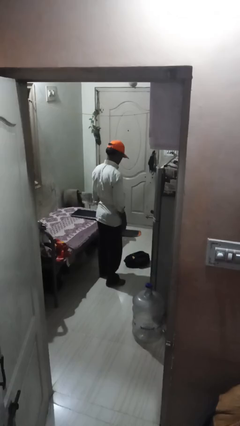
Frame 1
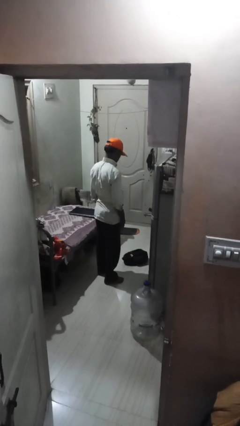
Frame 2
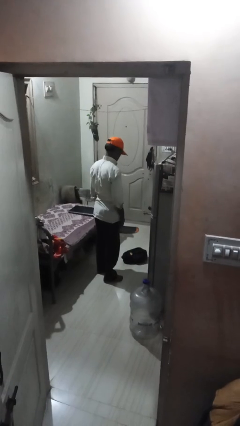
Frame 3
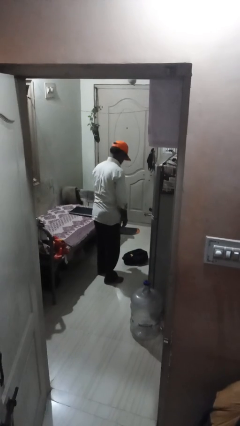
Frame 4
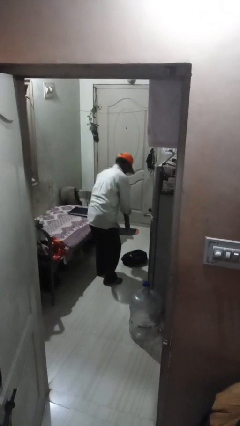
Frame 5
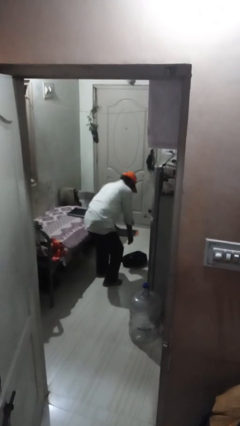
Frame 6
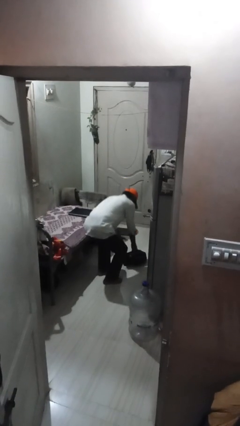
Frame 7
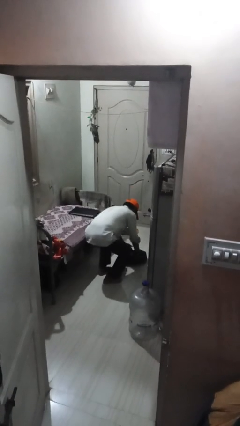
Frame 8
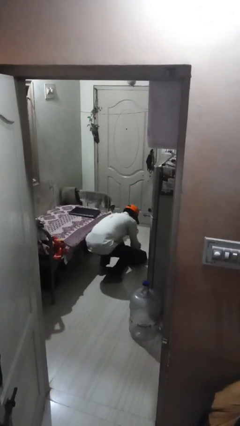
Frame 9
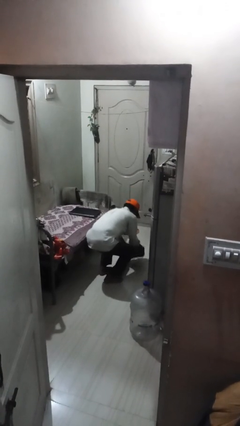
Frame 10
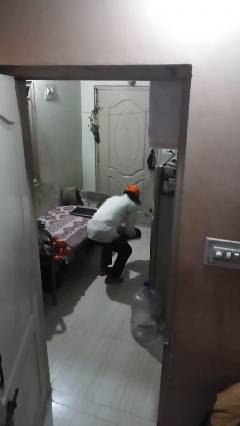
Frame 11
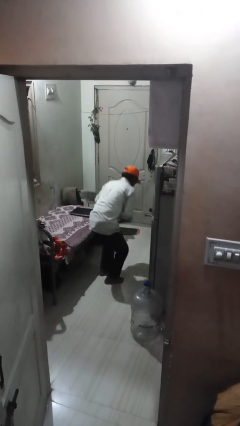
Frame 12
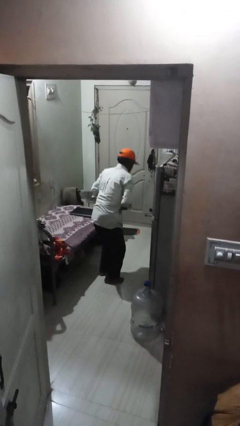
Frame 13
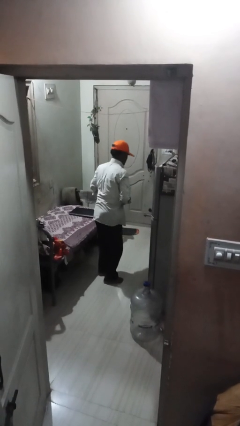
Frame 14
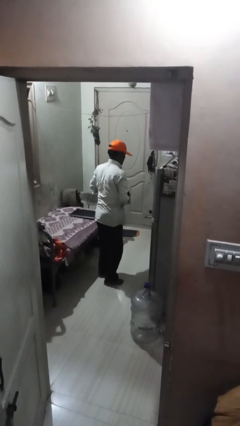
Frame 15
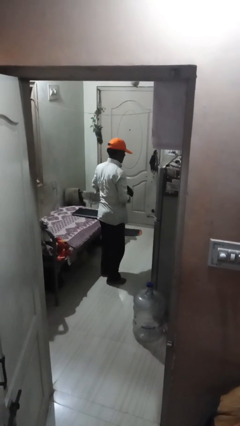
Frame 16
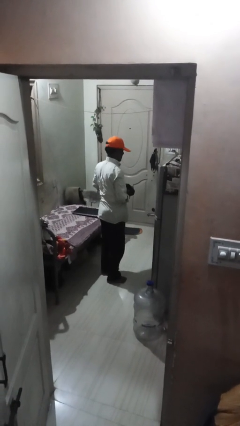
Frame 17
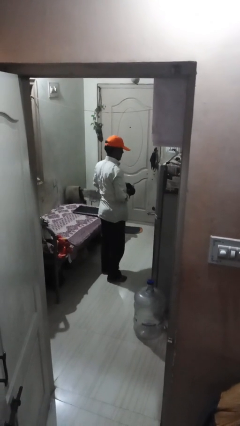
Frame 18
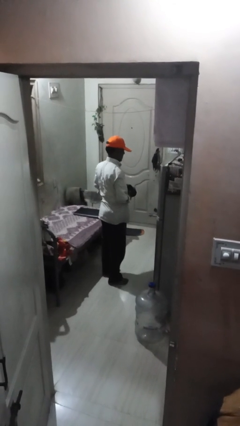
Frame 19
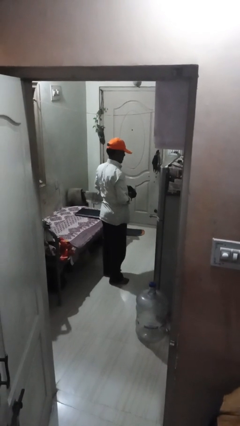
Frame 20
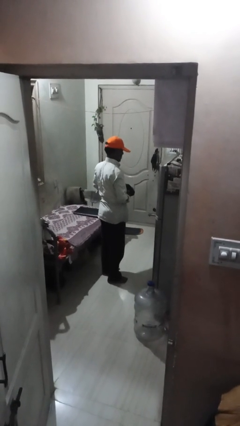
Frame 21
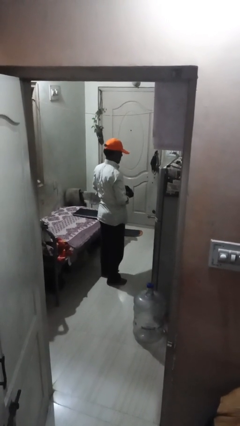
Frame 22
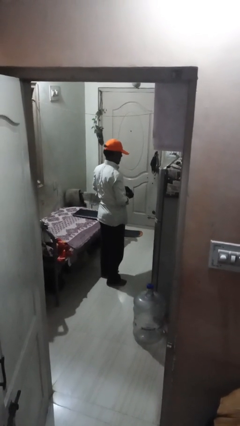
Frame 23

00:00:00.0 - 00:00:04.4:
person picks up object from floor

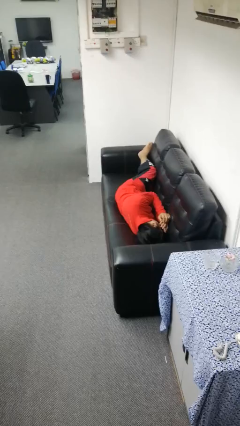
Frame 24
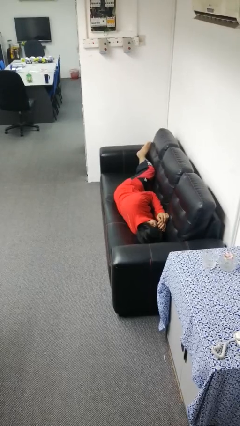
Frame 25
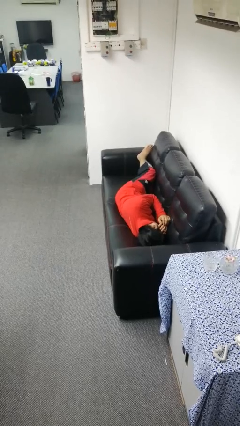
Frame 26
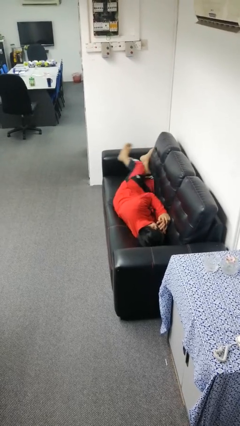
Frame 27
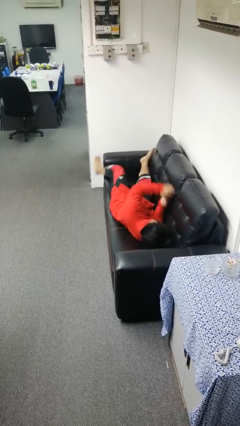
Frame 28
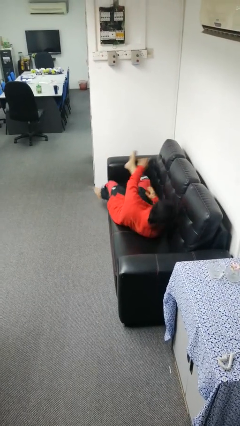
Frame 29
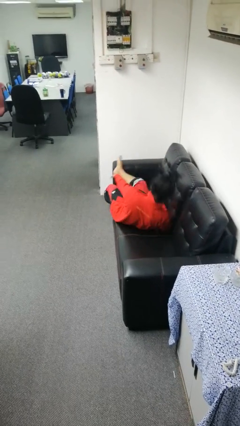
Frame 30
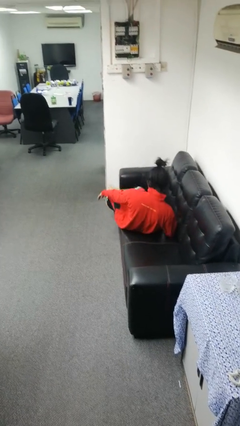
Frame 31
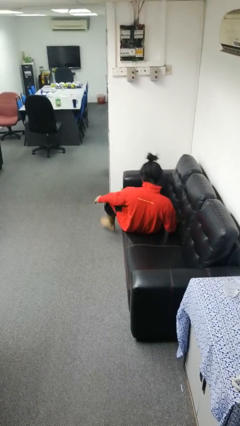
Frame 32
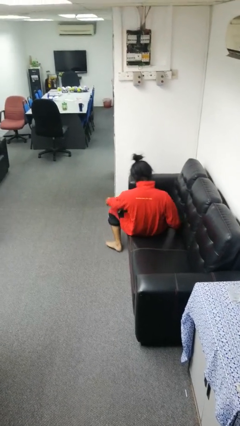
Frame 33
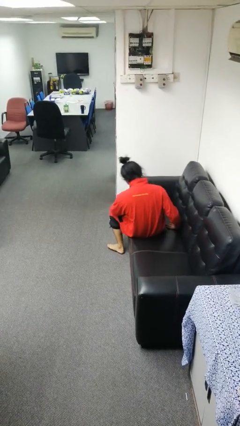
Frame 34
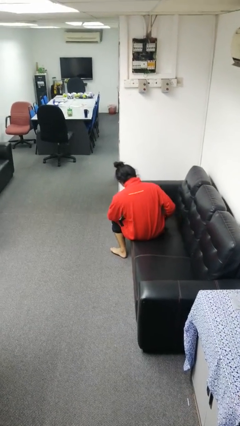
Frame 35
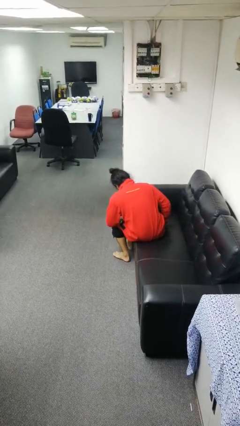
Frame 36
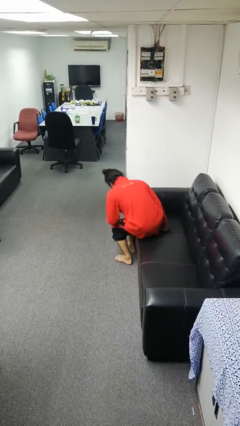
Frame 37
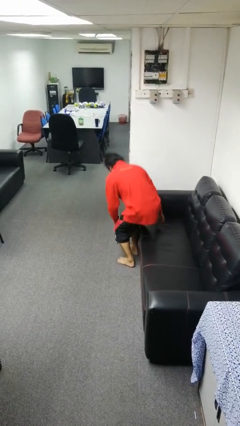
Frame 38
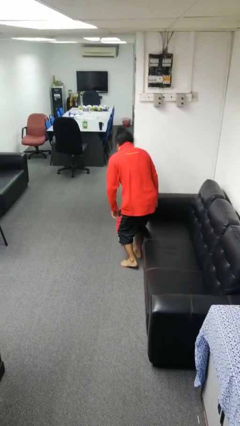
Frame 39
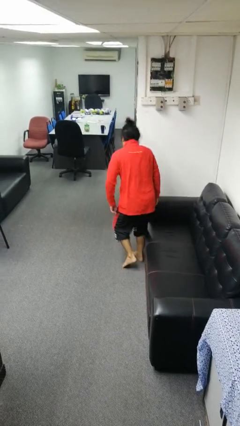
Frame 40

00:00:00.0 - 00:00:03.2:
person stands up

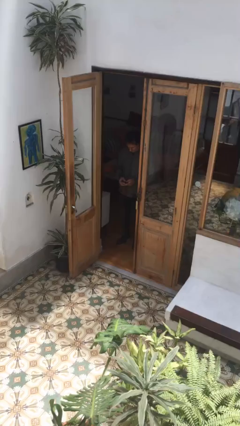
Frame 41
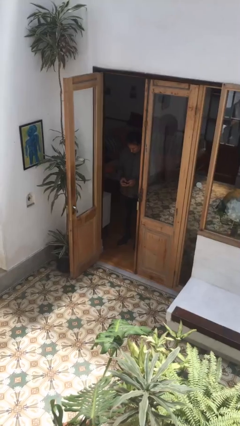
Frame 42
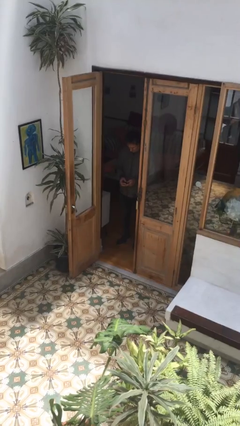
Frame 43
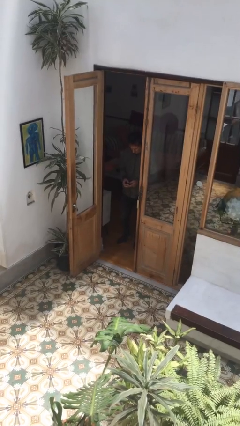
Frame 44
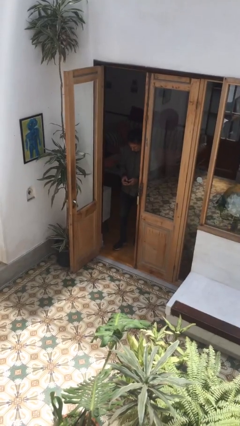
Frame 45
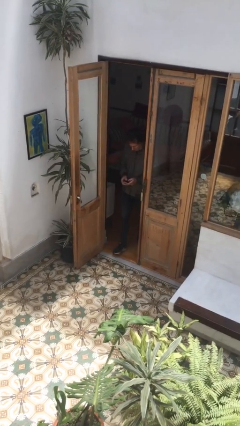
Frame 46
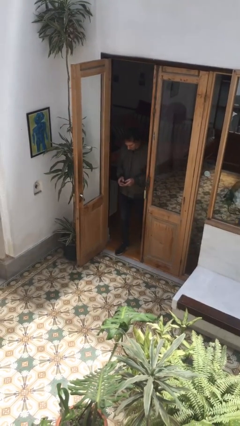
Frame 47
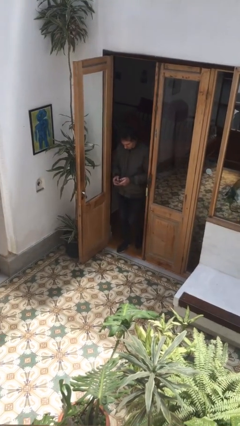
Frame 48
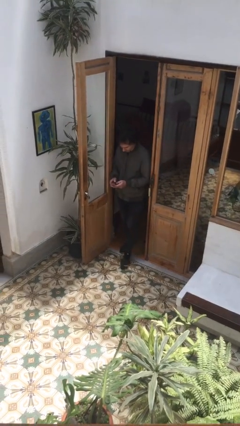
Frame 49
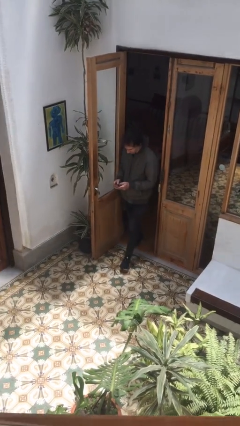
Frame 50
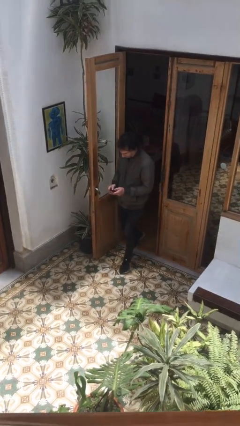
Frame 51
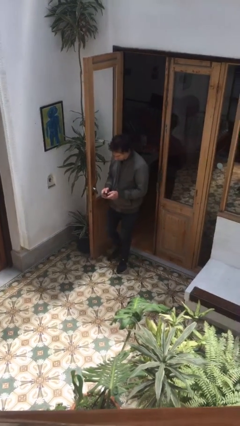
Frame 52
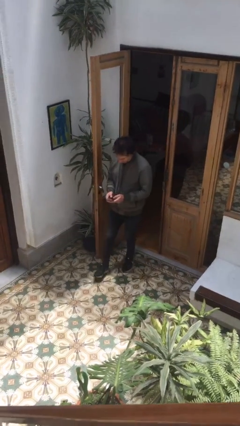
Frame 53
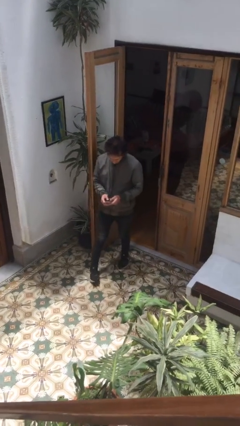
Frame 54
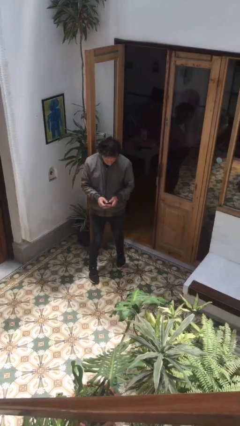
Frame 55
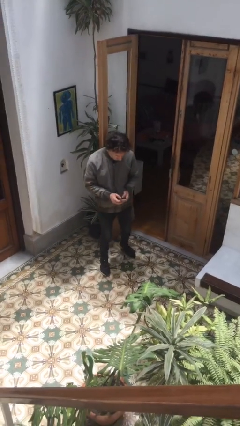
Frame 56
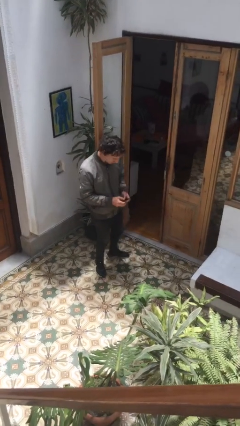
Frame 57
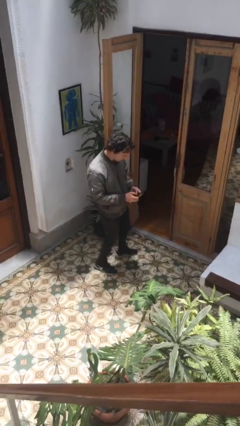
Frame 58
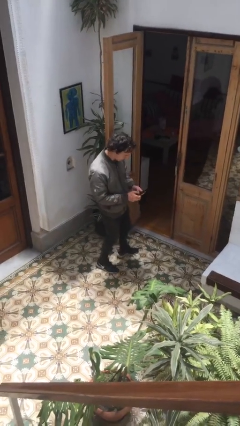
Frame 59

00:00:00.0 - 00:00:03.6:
person enters scene through structure

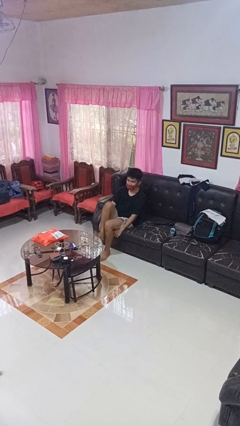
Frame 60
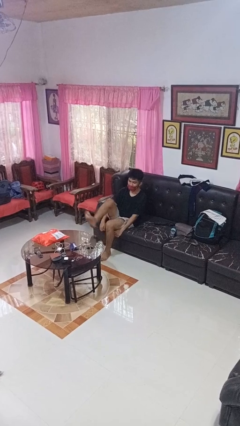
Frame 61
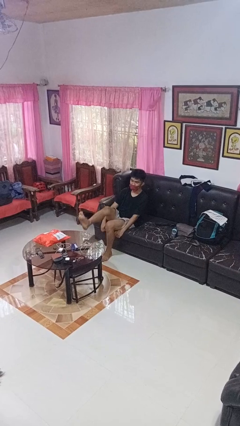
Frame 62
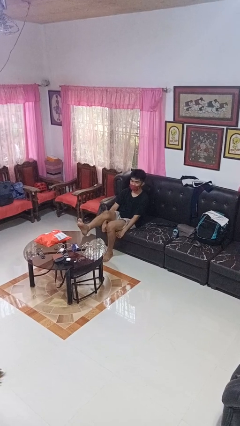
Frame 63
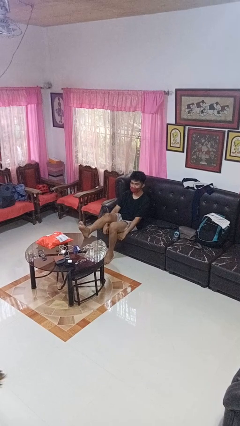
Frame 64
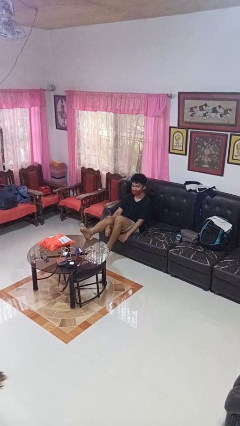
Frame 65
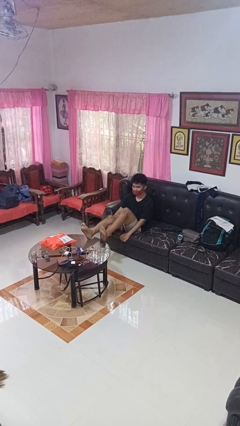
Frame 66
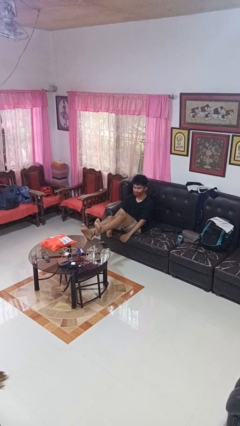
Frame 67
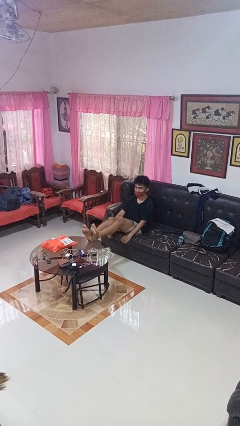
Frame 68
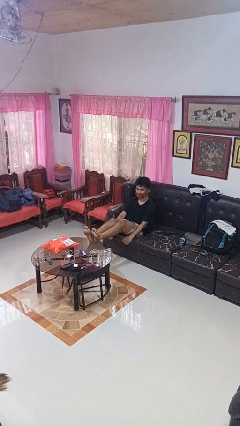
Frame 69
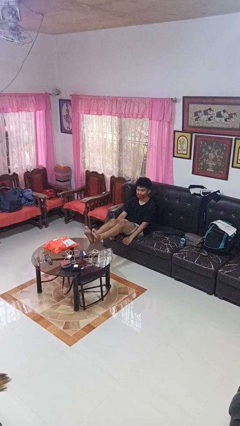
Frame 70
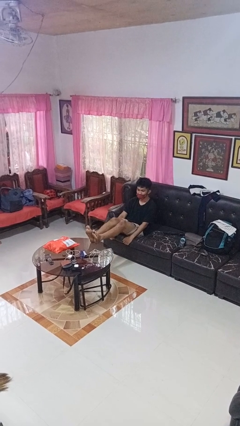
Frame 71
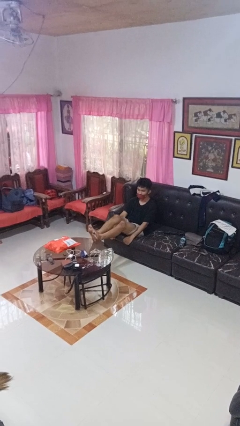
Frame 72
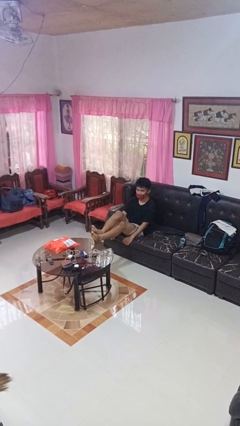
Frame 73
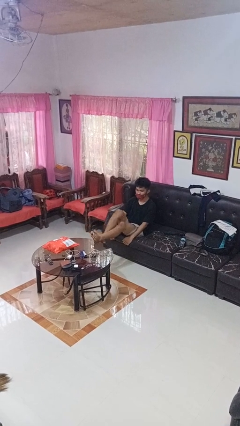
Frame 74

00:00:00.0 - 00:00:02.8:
person puts feet up

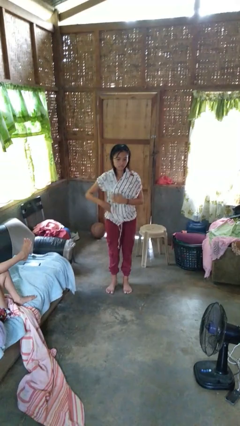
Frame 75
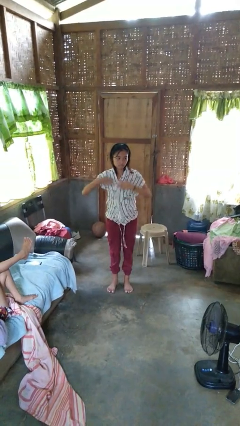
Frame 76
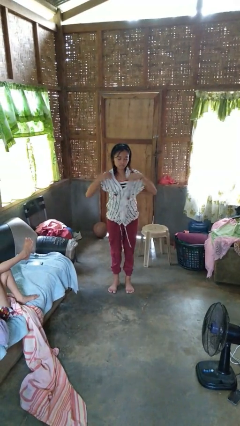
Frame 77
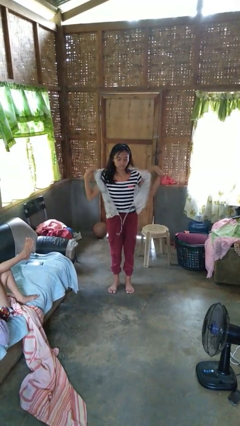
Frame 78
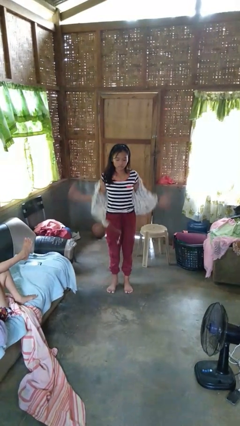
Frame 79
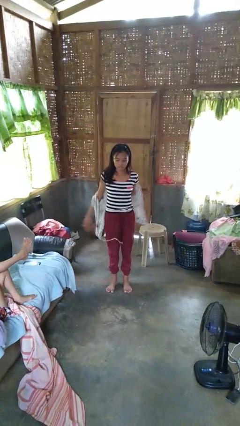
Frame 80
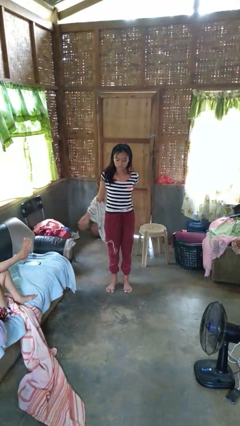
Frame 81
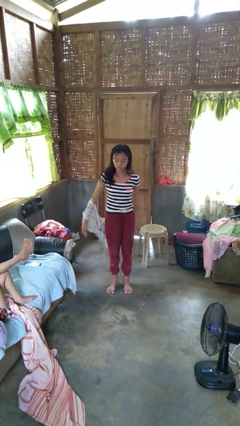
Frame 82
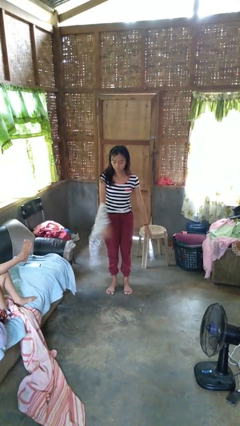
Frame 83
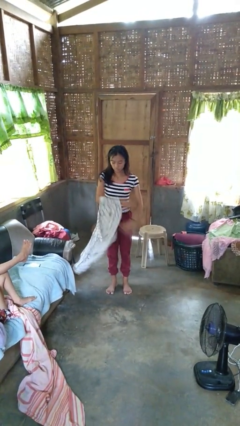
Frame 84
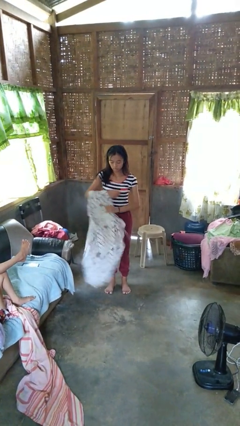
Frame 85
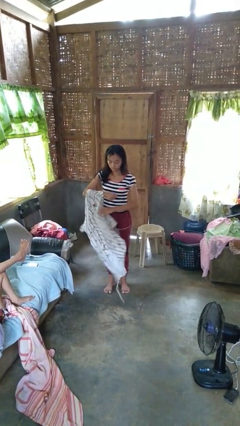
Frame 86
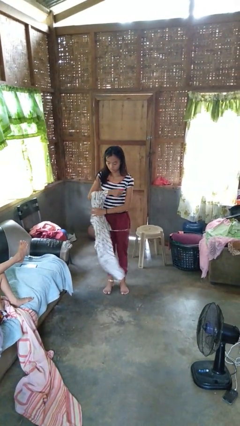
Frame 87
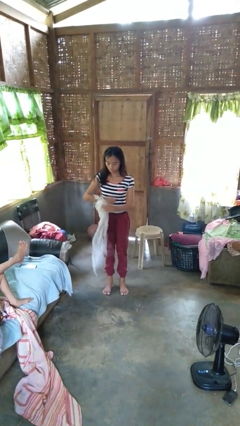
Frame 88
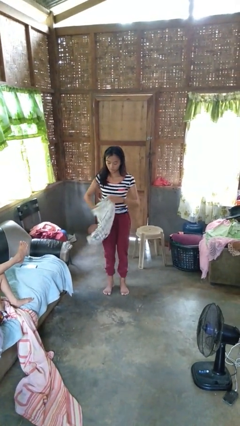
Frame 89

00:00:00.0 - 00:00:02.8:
person takes off shirt

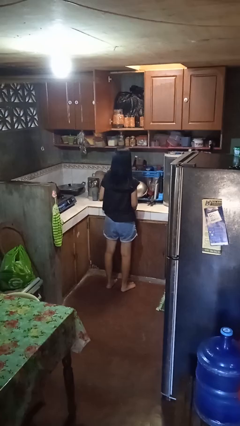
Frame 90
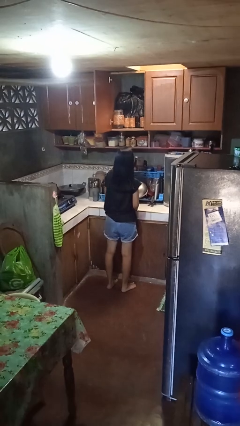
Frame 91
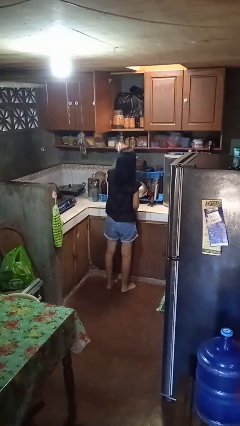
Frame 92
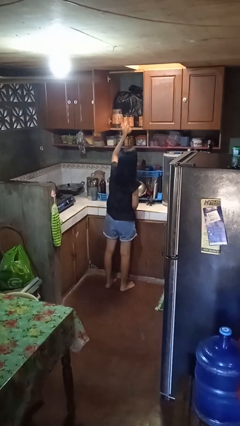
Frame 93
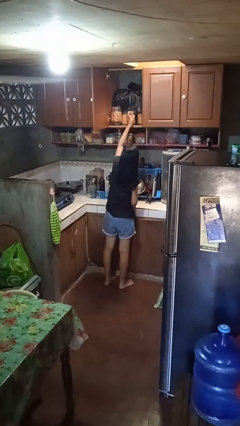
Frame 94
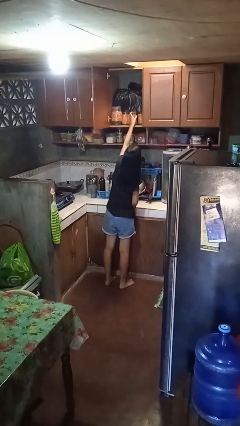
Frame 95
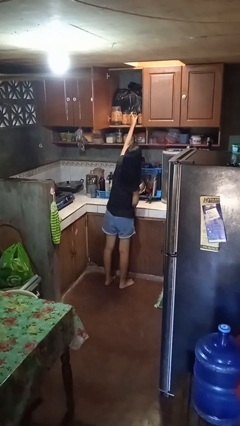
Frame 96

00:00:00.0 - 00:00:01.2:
person puts down object into cabinet
